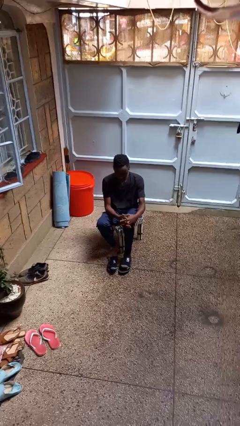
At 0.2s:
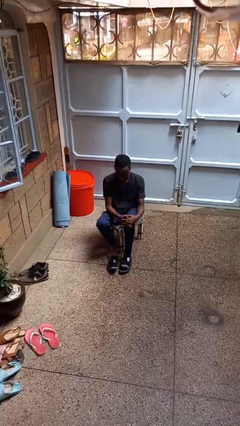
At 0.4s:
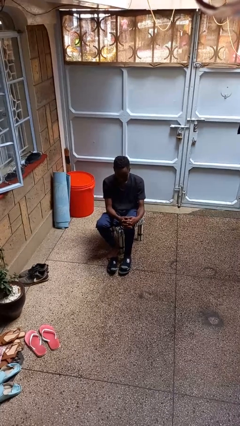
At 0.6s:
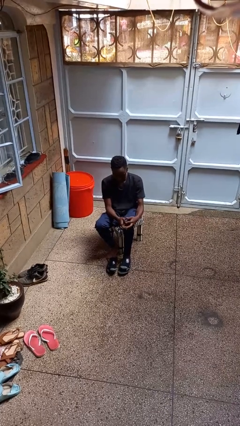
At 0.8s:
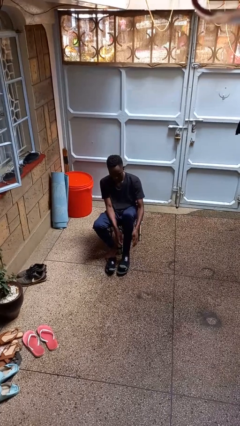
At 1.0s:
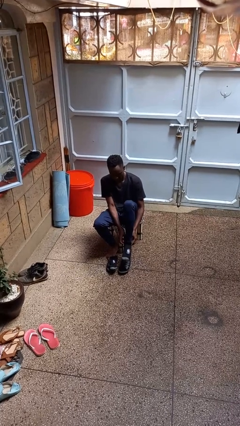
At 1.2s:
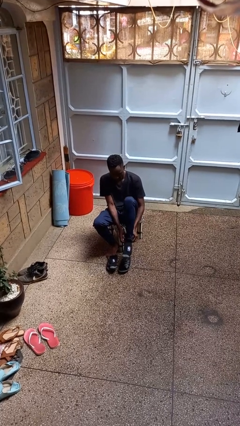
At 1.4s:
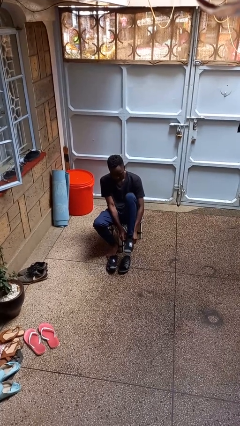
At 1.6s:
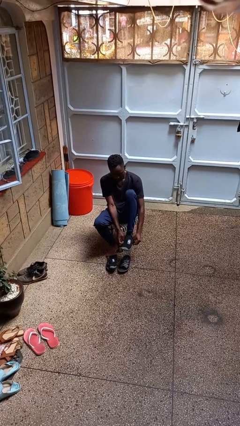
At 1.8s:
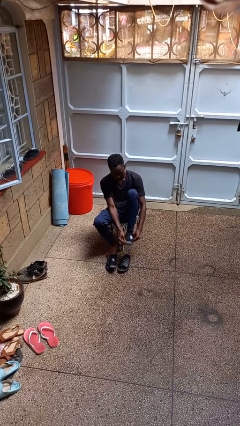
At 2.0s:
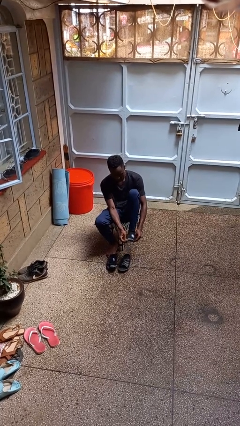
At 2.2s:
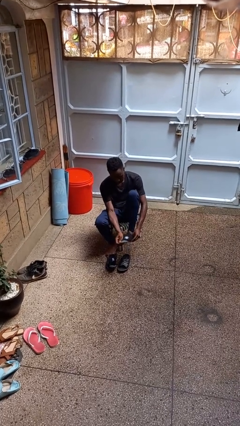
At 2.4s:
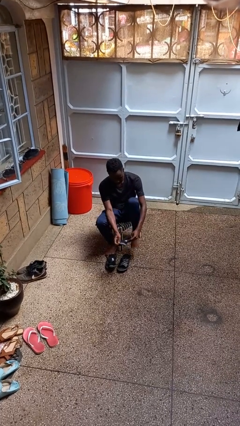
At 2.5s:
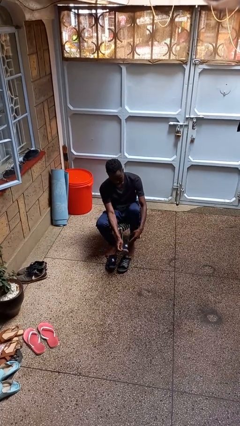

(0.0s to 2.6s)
person takes off socks

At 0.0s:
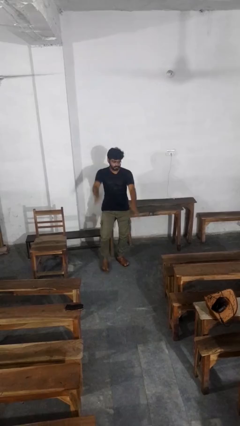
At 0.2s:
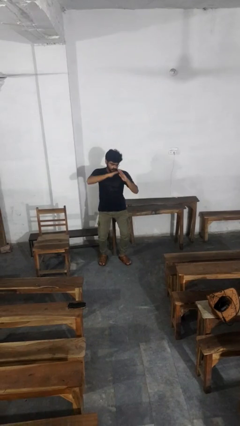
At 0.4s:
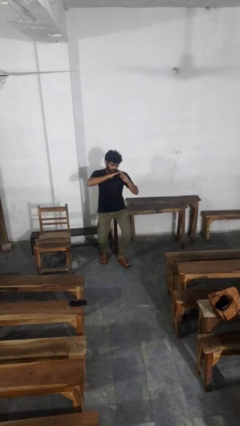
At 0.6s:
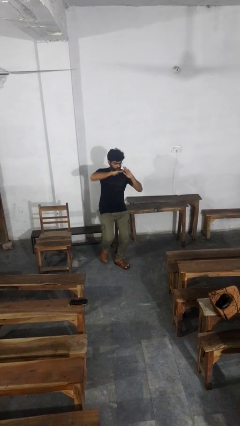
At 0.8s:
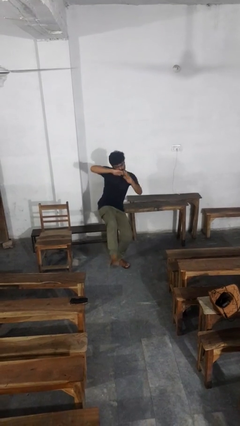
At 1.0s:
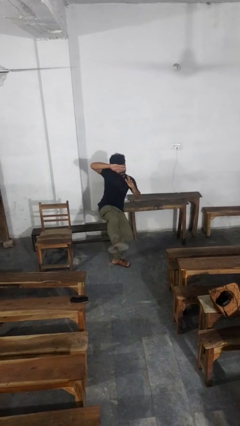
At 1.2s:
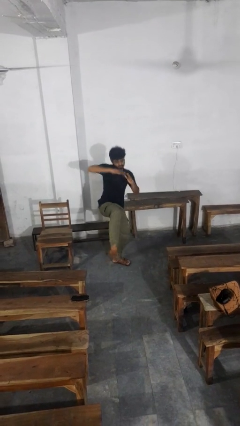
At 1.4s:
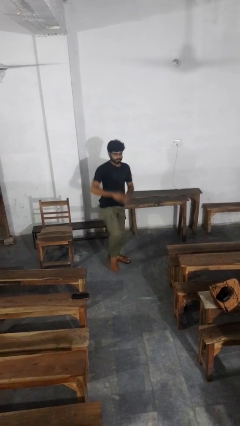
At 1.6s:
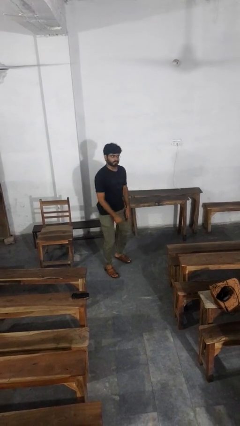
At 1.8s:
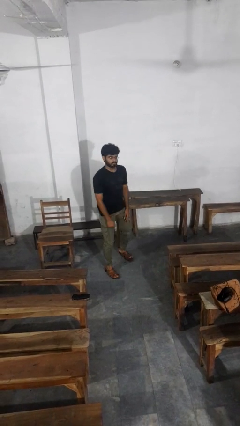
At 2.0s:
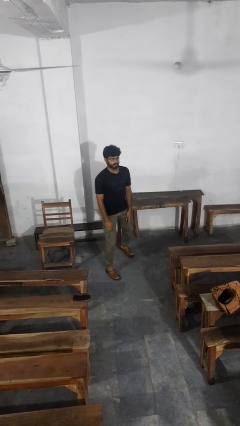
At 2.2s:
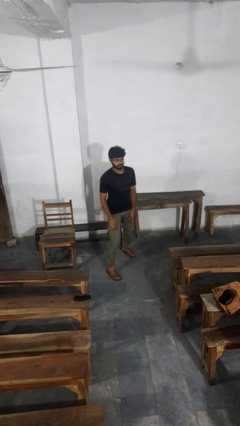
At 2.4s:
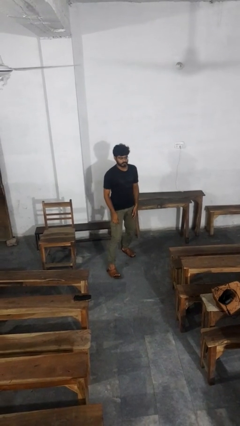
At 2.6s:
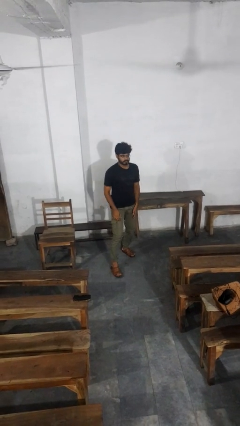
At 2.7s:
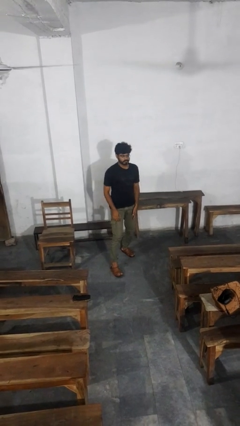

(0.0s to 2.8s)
person karate kicks

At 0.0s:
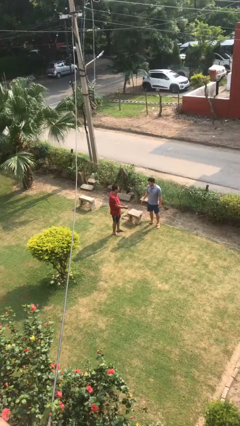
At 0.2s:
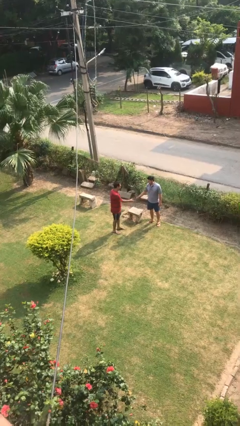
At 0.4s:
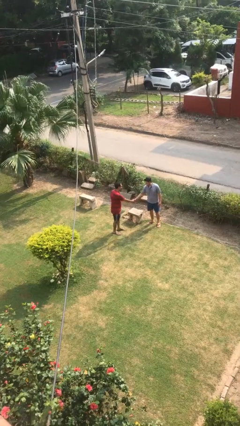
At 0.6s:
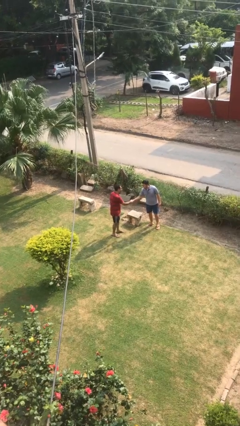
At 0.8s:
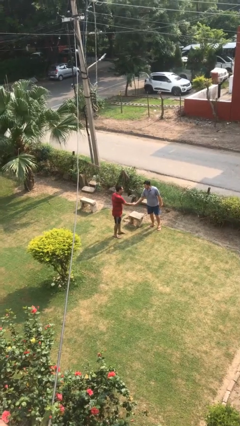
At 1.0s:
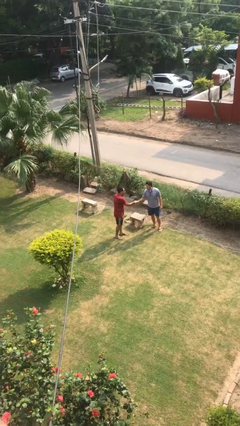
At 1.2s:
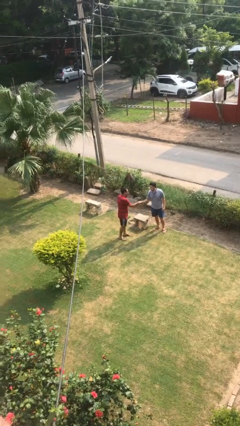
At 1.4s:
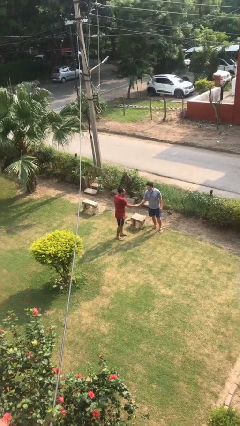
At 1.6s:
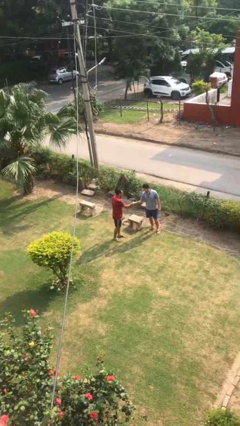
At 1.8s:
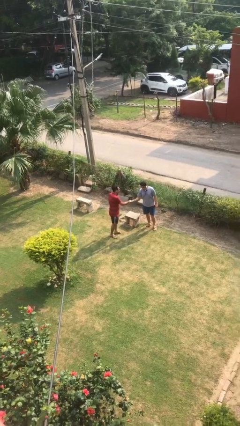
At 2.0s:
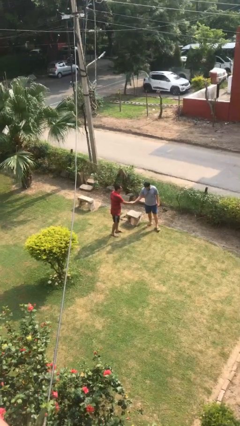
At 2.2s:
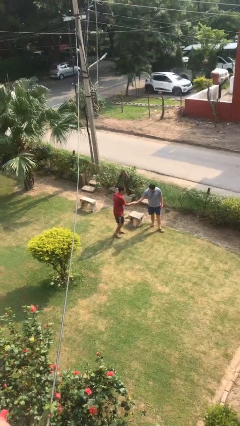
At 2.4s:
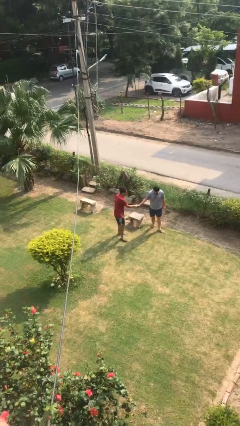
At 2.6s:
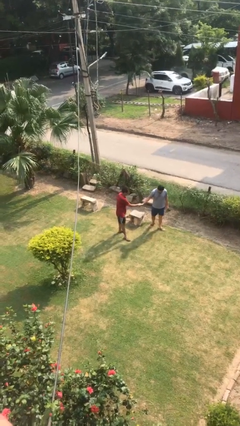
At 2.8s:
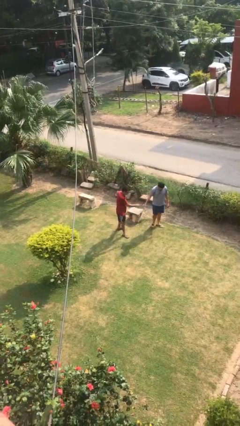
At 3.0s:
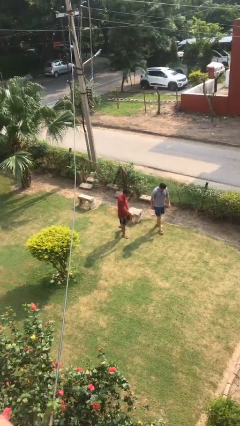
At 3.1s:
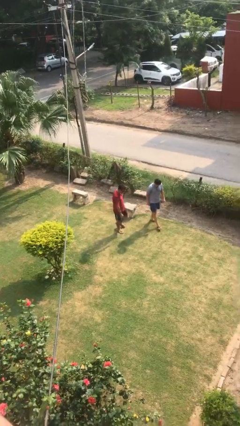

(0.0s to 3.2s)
person shakes hand

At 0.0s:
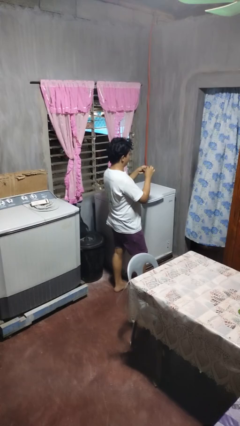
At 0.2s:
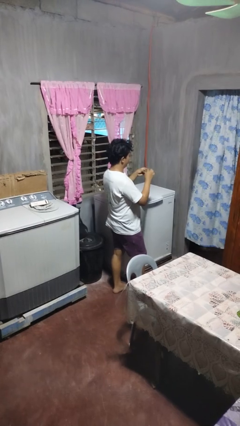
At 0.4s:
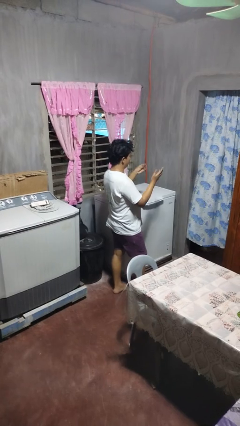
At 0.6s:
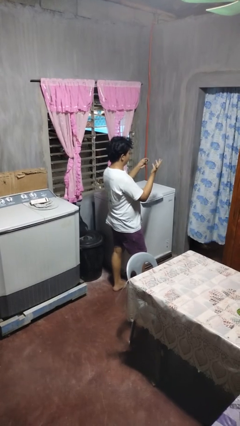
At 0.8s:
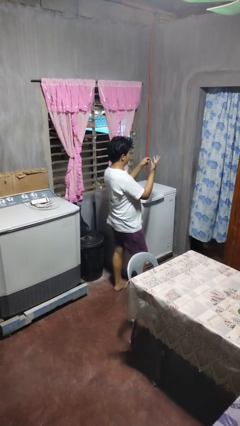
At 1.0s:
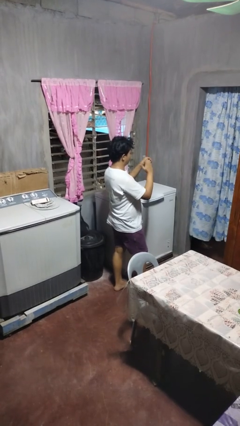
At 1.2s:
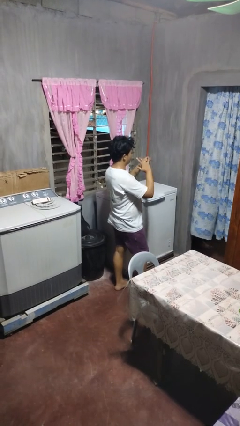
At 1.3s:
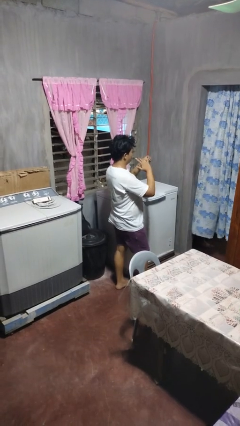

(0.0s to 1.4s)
person puts on ring

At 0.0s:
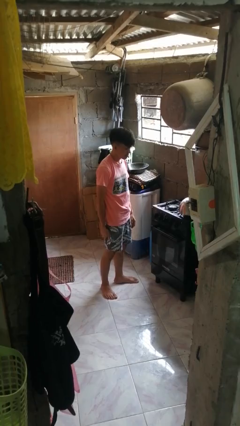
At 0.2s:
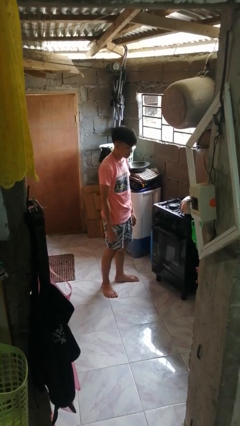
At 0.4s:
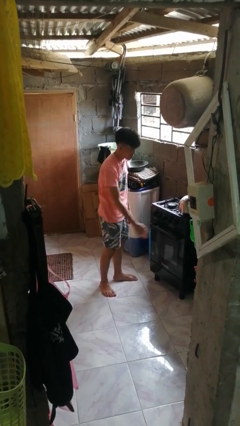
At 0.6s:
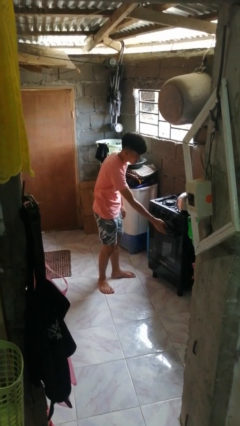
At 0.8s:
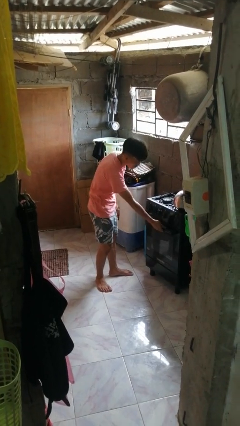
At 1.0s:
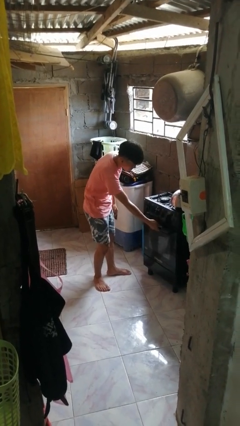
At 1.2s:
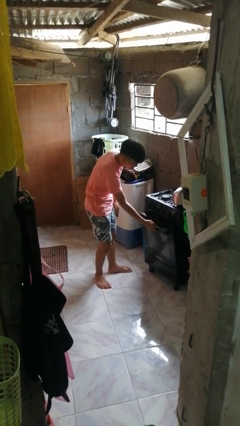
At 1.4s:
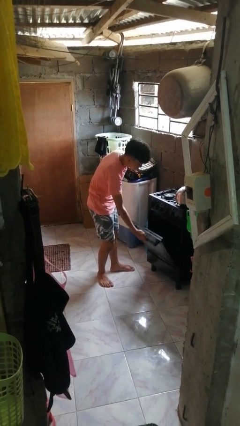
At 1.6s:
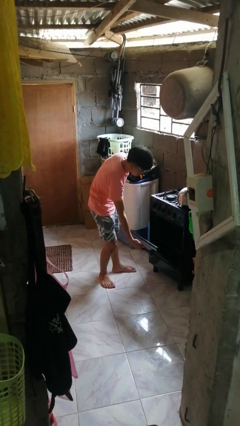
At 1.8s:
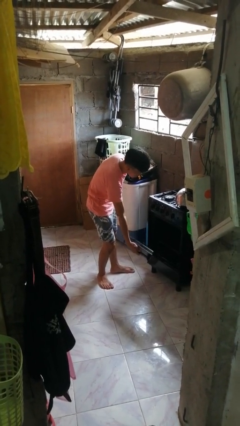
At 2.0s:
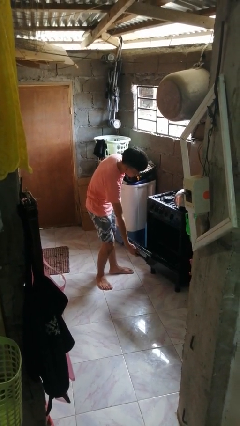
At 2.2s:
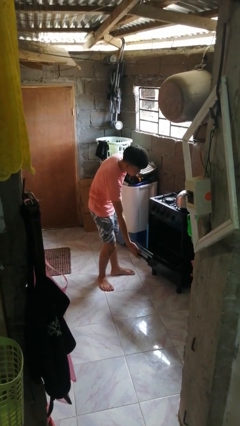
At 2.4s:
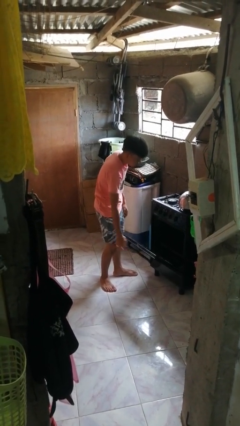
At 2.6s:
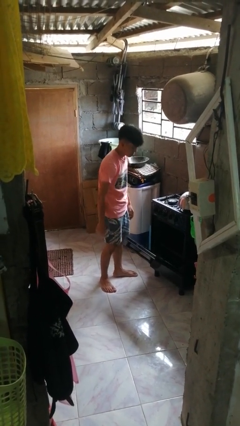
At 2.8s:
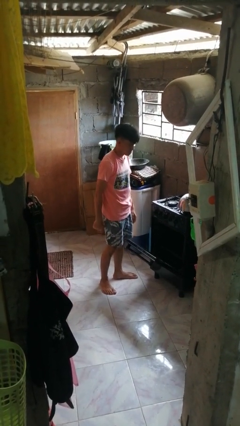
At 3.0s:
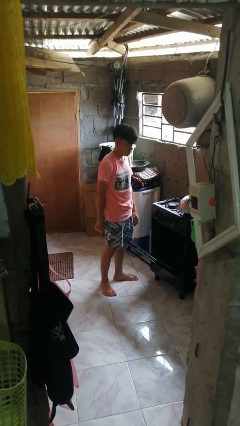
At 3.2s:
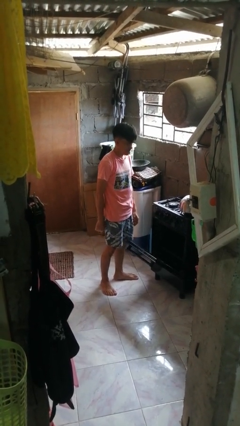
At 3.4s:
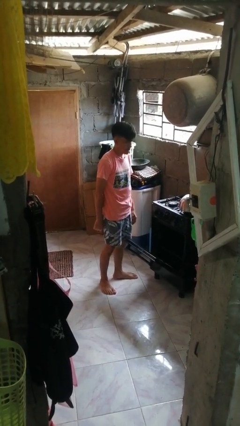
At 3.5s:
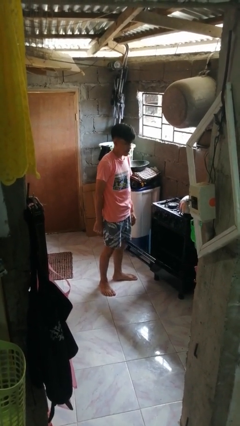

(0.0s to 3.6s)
person opens oven door

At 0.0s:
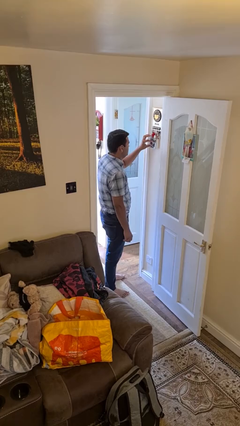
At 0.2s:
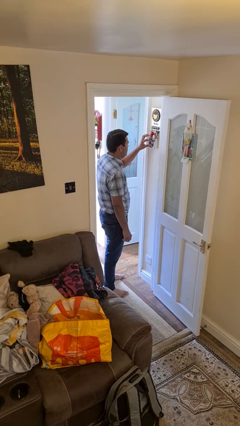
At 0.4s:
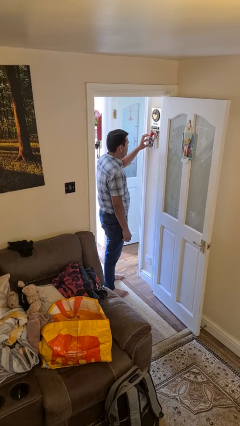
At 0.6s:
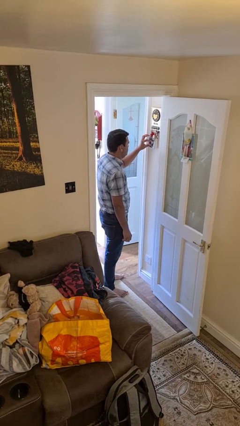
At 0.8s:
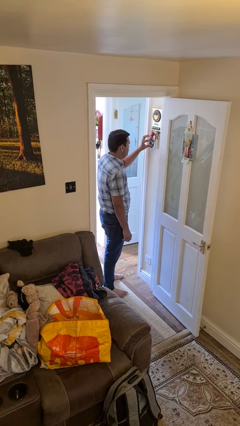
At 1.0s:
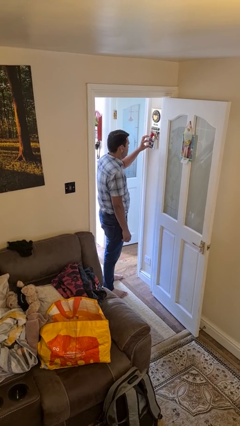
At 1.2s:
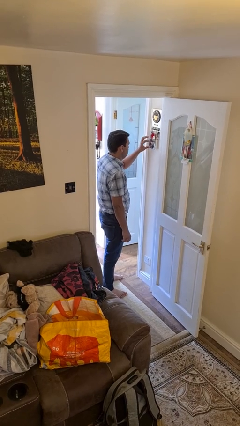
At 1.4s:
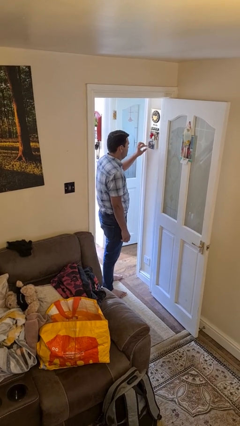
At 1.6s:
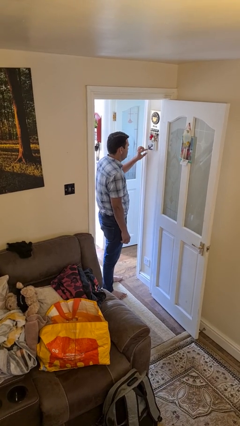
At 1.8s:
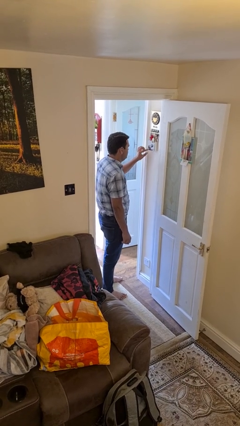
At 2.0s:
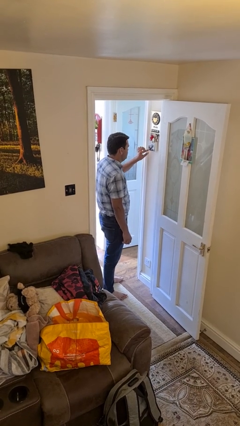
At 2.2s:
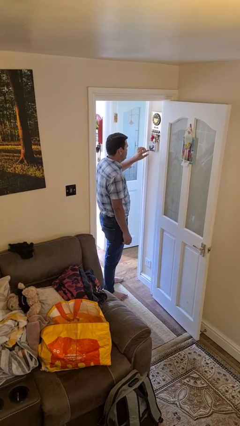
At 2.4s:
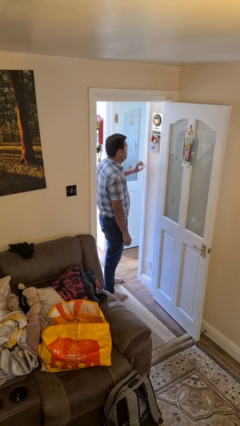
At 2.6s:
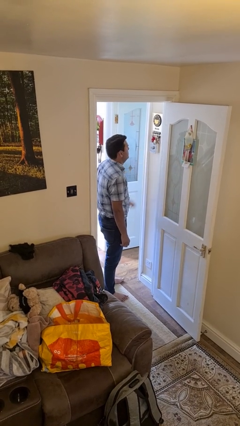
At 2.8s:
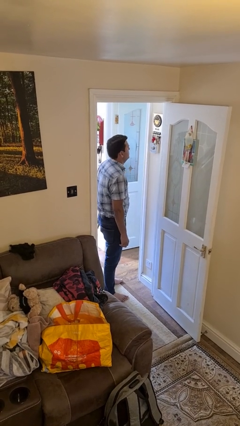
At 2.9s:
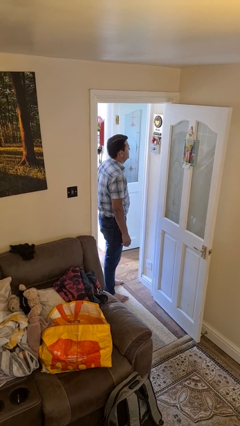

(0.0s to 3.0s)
person adjusts thermostat

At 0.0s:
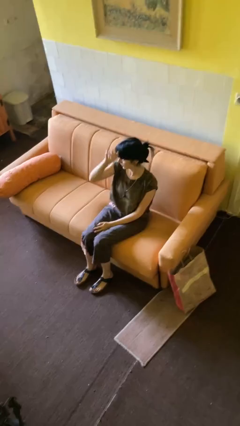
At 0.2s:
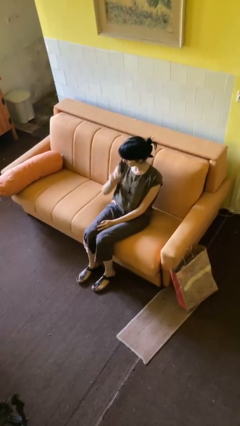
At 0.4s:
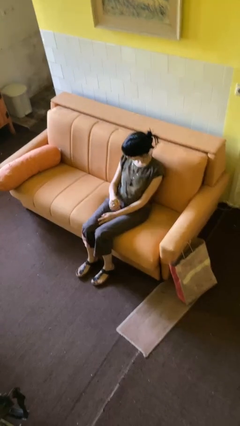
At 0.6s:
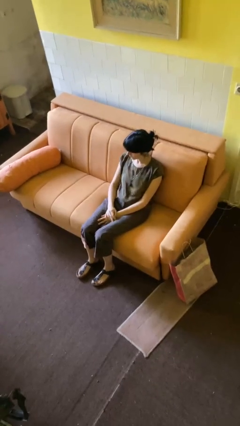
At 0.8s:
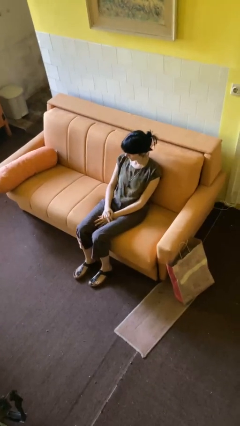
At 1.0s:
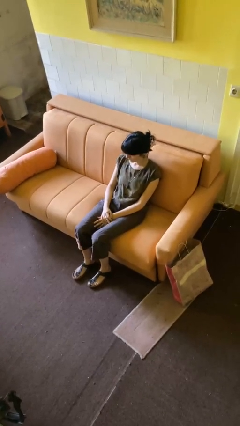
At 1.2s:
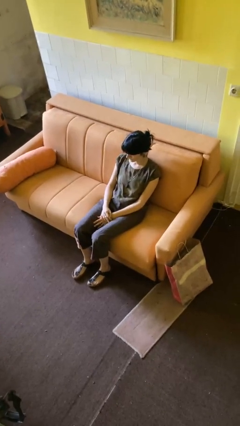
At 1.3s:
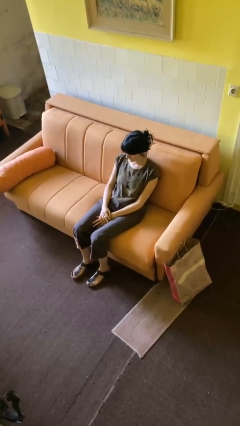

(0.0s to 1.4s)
person gestures lower hand
